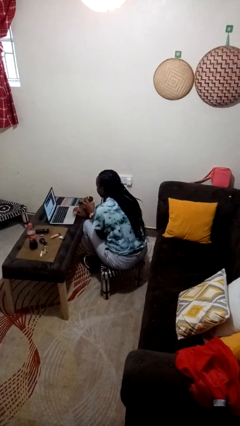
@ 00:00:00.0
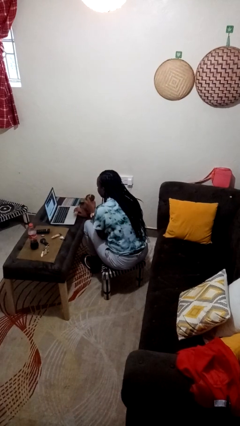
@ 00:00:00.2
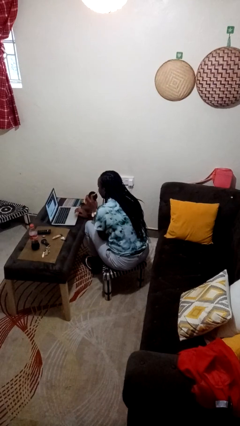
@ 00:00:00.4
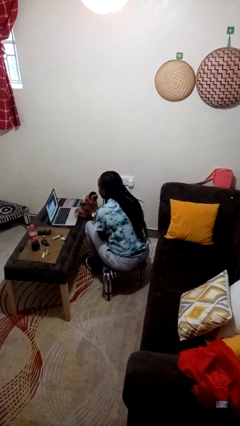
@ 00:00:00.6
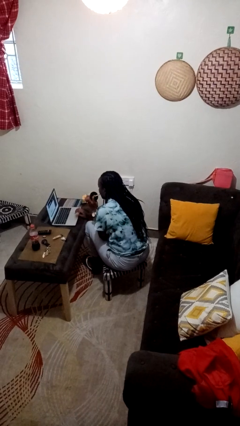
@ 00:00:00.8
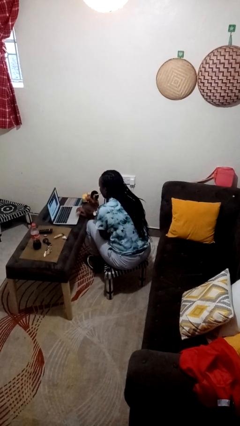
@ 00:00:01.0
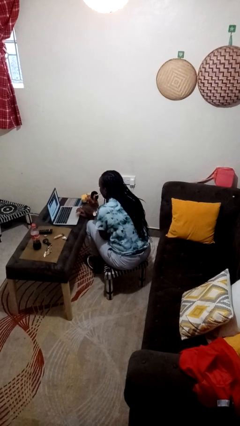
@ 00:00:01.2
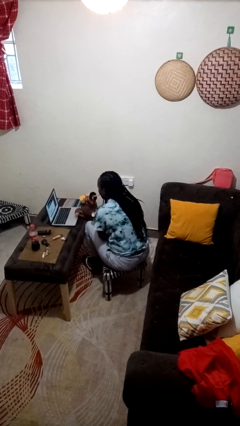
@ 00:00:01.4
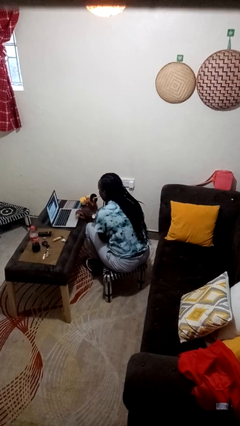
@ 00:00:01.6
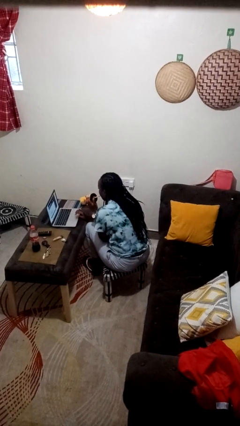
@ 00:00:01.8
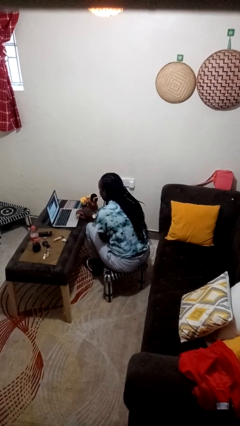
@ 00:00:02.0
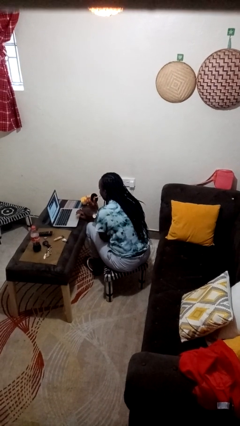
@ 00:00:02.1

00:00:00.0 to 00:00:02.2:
person drinks from straw

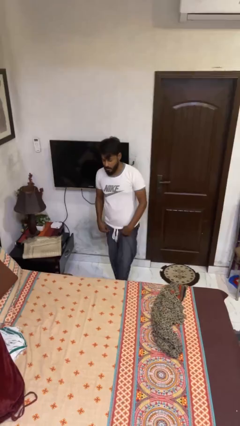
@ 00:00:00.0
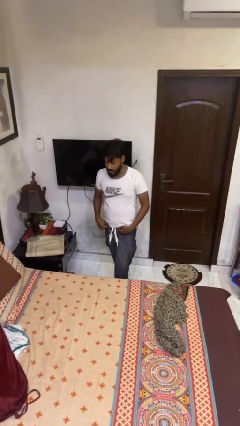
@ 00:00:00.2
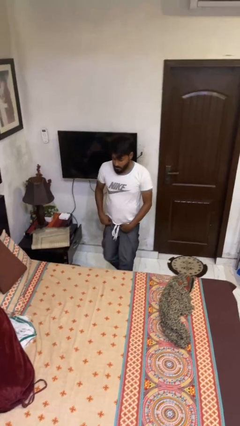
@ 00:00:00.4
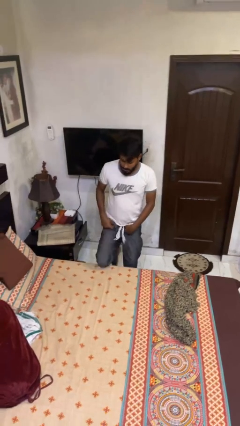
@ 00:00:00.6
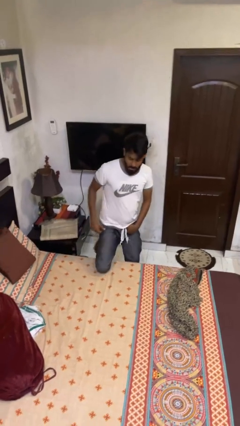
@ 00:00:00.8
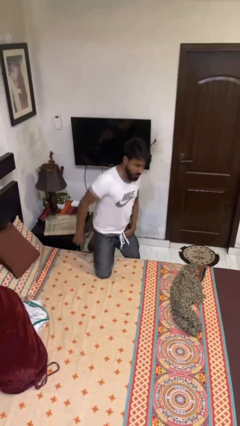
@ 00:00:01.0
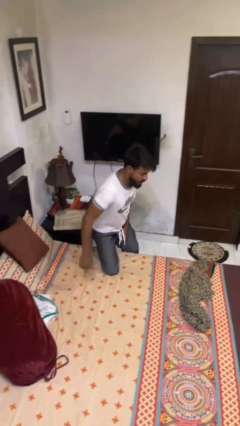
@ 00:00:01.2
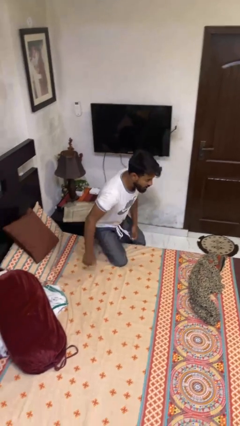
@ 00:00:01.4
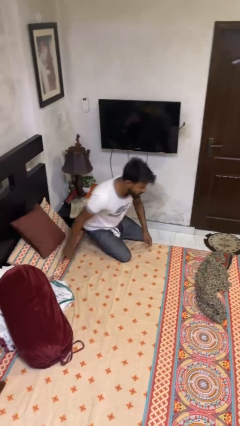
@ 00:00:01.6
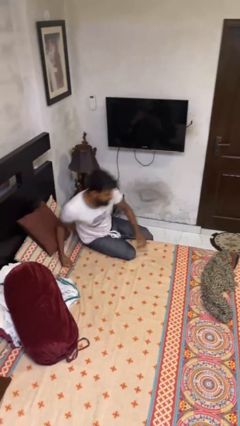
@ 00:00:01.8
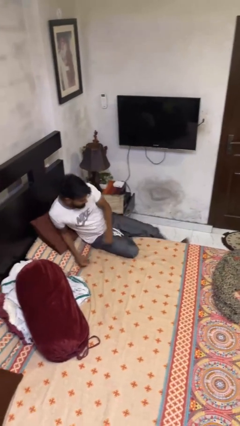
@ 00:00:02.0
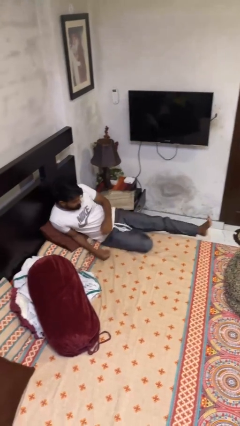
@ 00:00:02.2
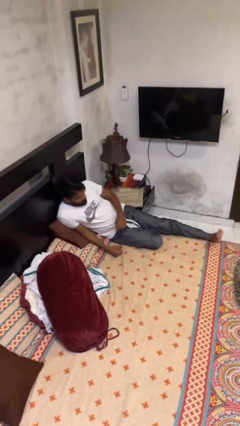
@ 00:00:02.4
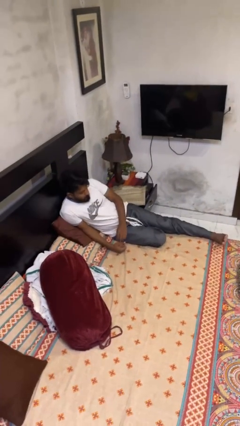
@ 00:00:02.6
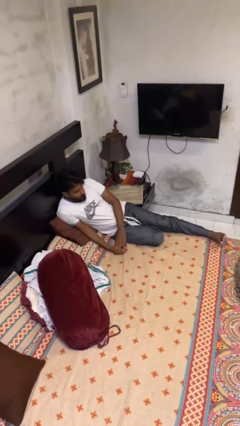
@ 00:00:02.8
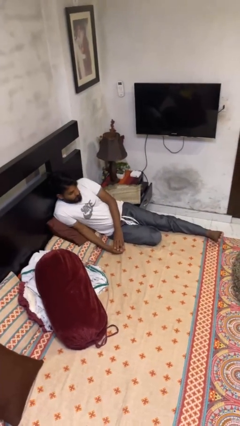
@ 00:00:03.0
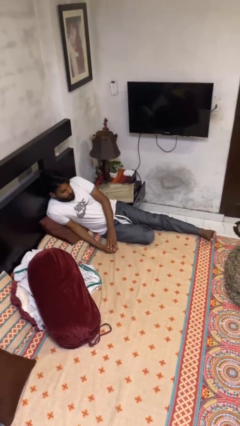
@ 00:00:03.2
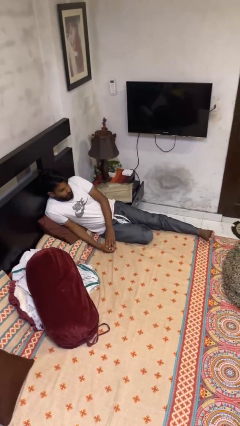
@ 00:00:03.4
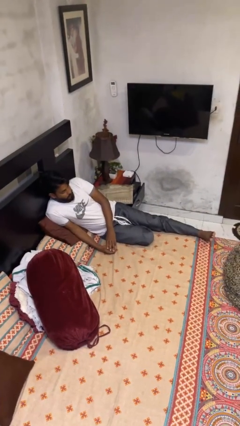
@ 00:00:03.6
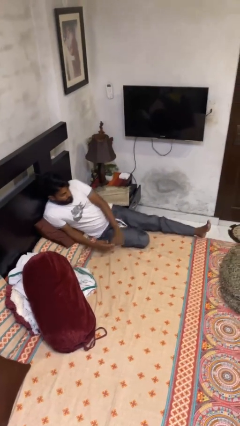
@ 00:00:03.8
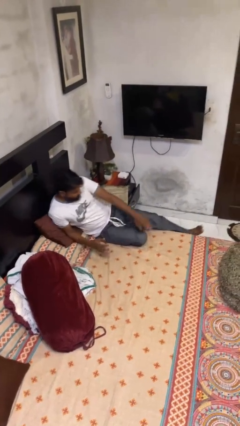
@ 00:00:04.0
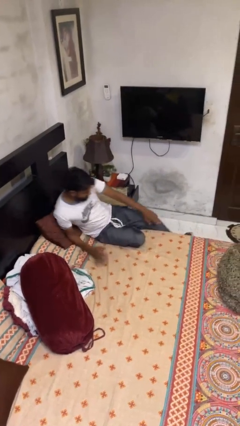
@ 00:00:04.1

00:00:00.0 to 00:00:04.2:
person lies down on bed

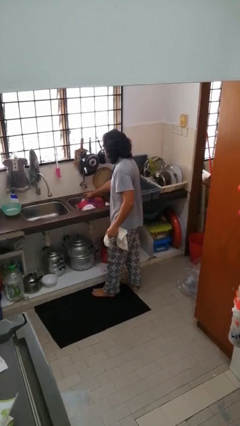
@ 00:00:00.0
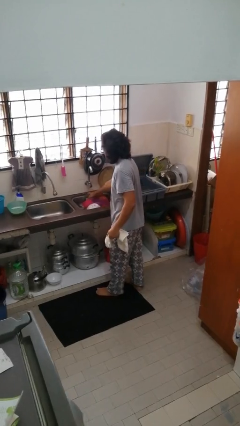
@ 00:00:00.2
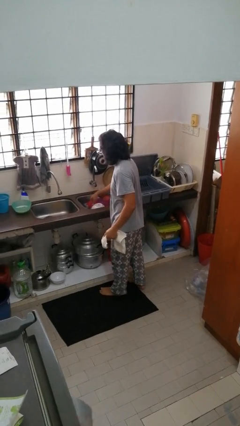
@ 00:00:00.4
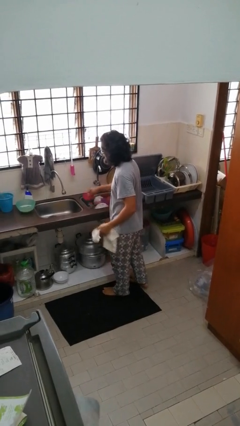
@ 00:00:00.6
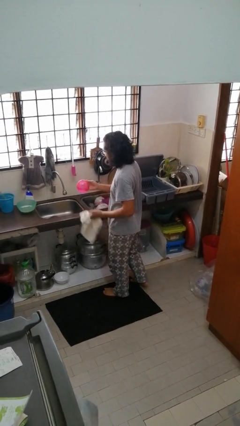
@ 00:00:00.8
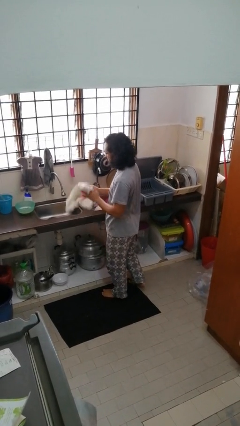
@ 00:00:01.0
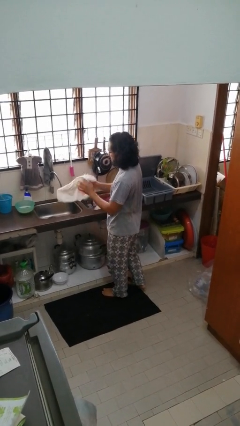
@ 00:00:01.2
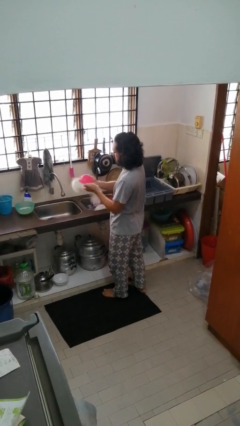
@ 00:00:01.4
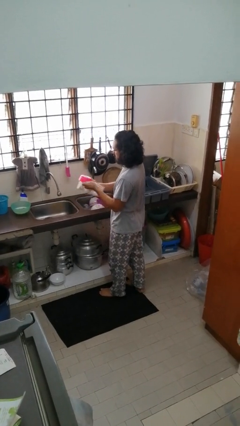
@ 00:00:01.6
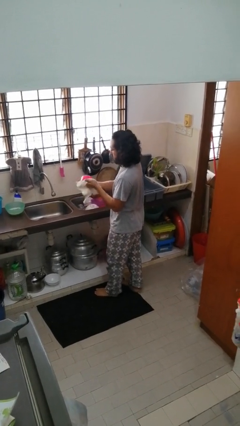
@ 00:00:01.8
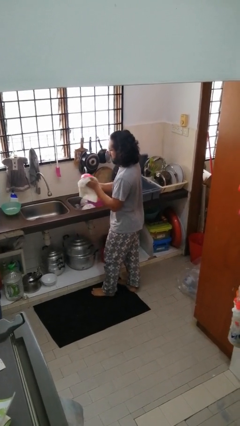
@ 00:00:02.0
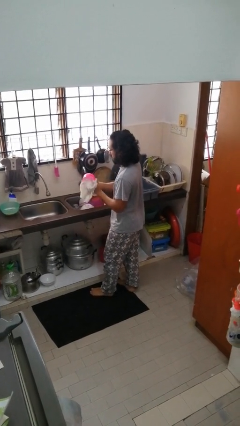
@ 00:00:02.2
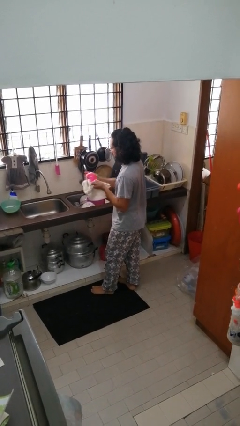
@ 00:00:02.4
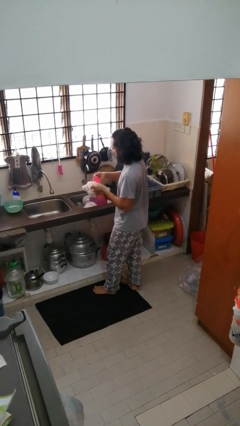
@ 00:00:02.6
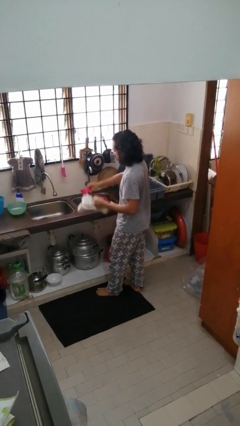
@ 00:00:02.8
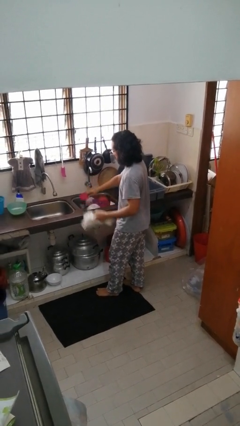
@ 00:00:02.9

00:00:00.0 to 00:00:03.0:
person dries dish

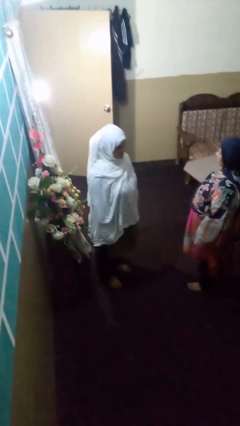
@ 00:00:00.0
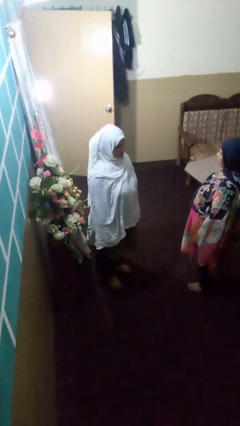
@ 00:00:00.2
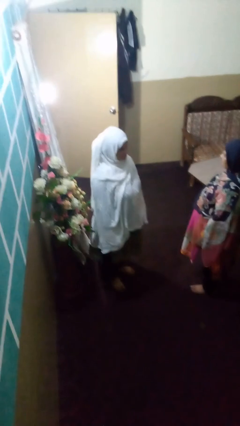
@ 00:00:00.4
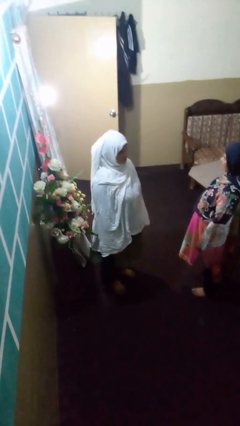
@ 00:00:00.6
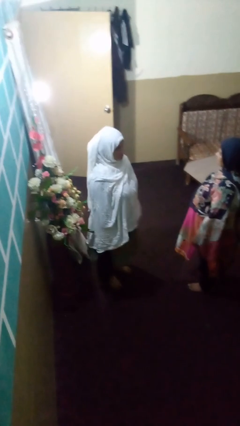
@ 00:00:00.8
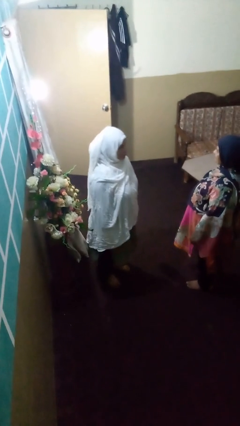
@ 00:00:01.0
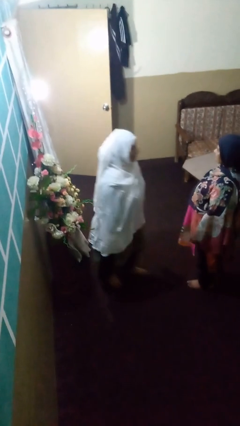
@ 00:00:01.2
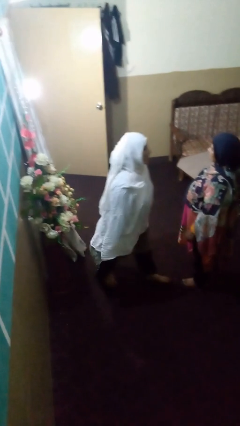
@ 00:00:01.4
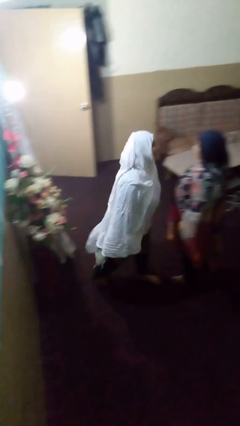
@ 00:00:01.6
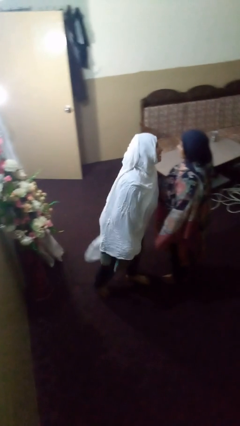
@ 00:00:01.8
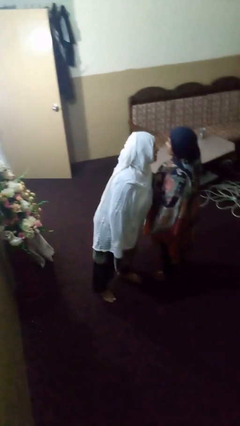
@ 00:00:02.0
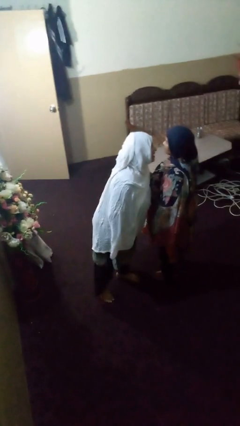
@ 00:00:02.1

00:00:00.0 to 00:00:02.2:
person laughs with person

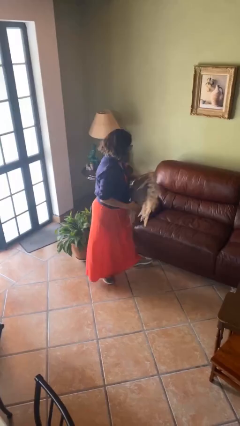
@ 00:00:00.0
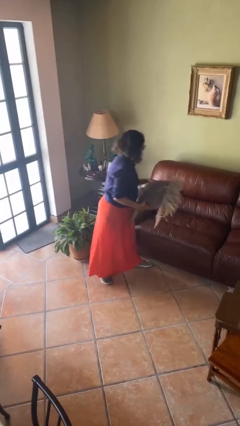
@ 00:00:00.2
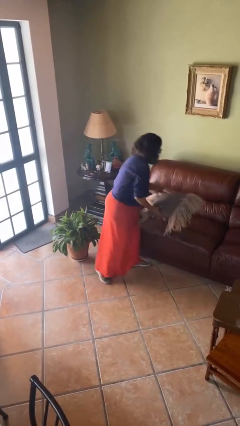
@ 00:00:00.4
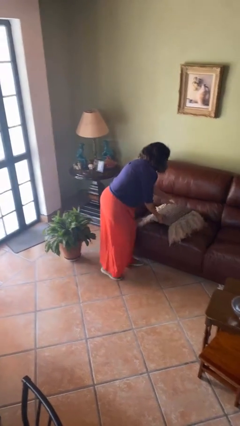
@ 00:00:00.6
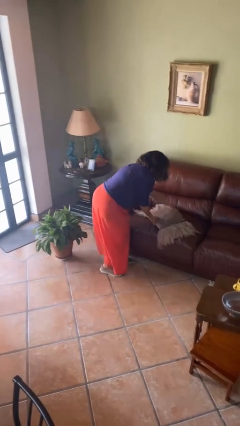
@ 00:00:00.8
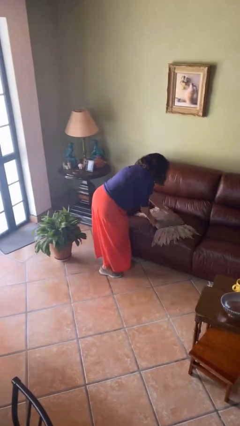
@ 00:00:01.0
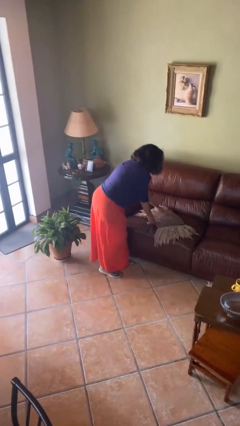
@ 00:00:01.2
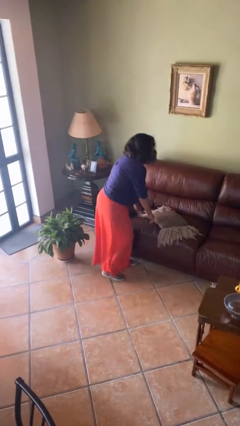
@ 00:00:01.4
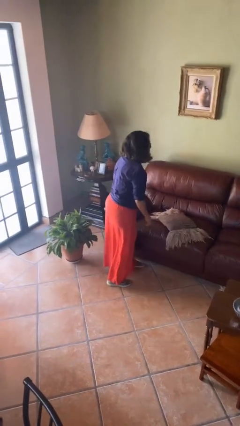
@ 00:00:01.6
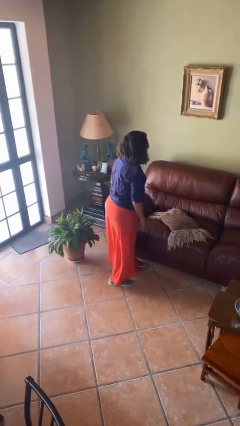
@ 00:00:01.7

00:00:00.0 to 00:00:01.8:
person puts down object on couch

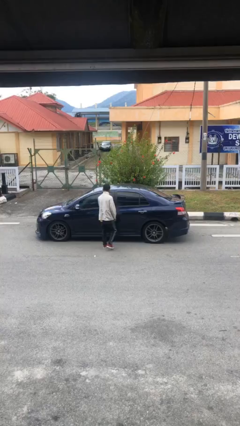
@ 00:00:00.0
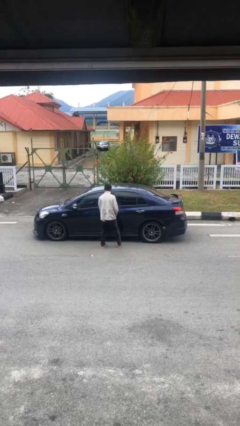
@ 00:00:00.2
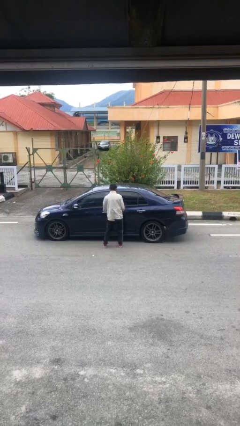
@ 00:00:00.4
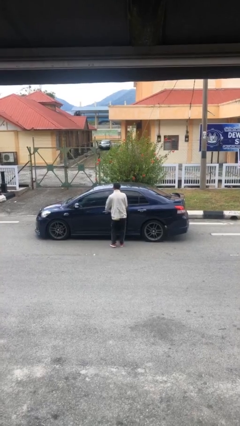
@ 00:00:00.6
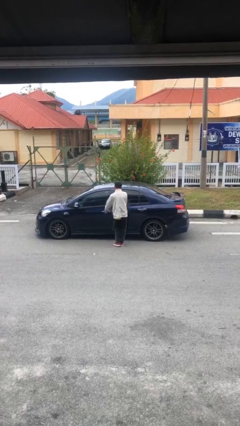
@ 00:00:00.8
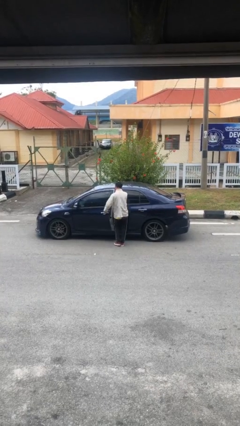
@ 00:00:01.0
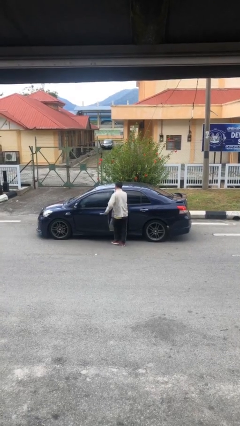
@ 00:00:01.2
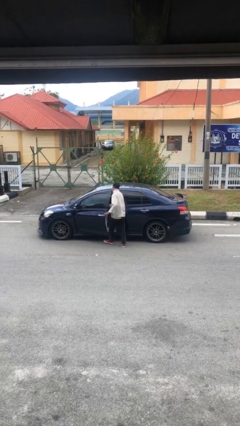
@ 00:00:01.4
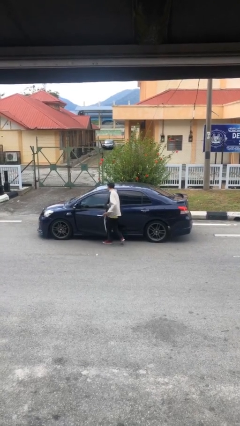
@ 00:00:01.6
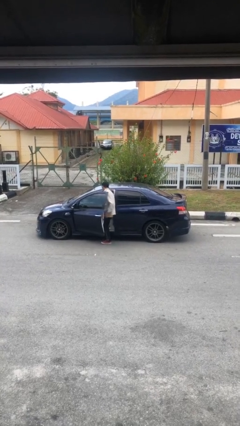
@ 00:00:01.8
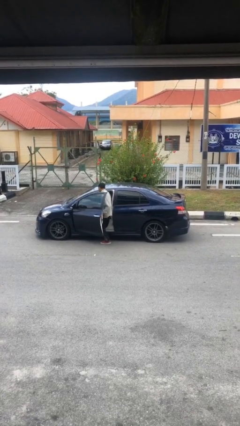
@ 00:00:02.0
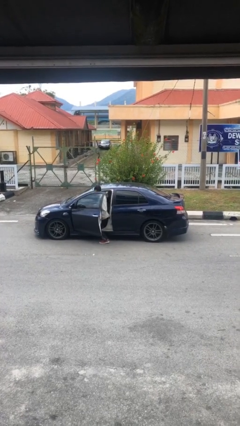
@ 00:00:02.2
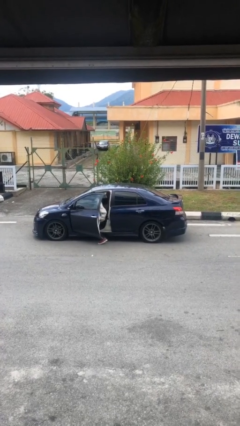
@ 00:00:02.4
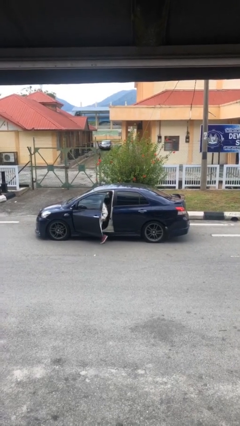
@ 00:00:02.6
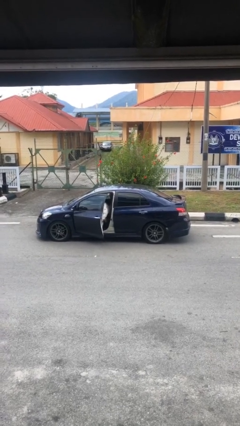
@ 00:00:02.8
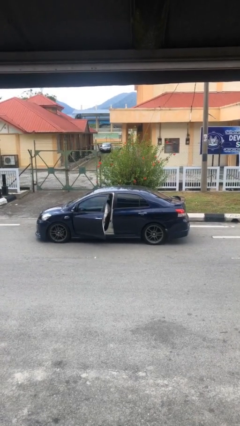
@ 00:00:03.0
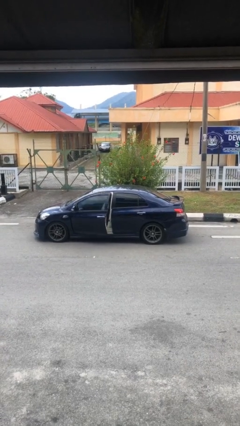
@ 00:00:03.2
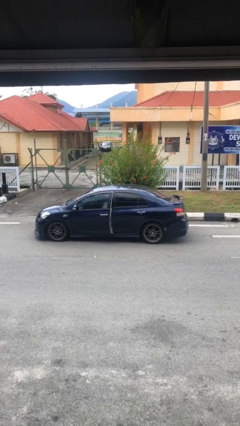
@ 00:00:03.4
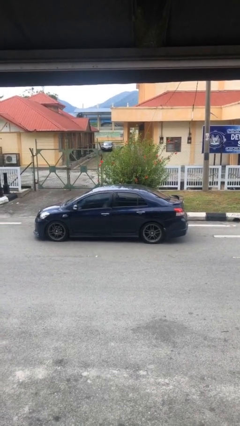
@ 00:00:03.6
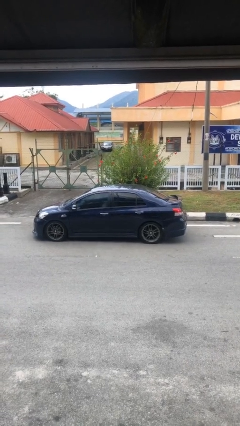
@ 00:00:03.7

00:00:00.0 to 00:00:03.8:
car picks up person
